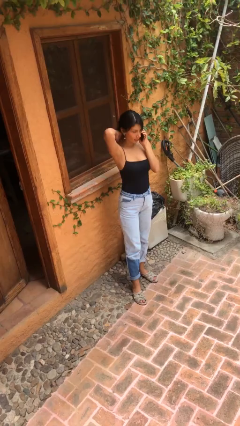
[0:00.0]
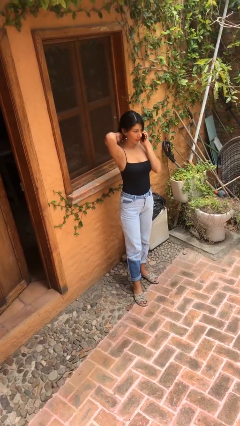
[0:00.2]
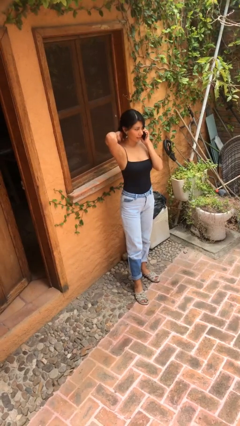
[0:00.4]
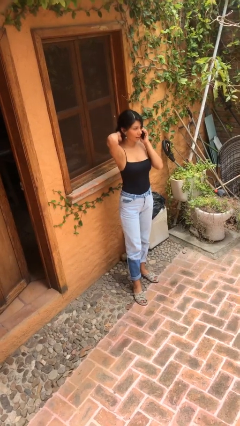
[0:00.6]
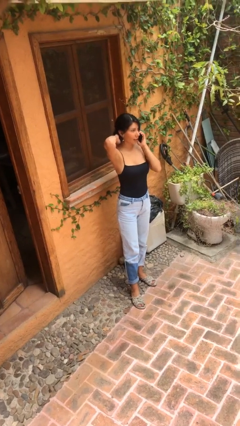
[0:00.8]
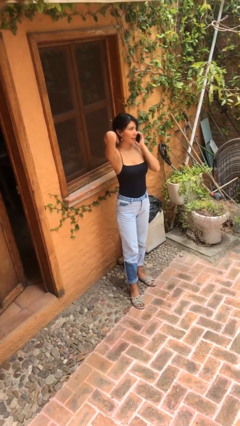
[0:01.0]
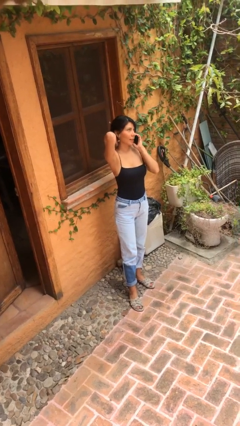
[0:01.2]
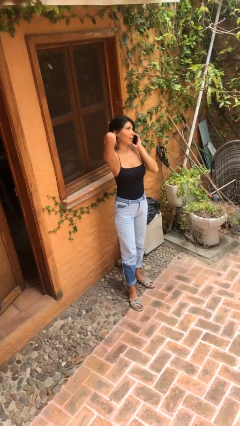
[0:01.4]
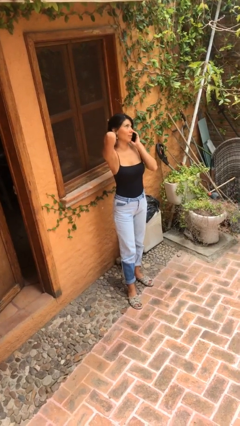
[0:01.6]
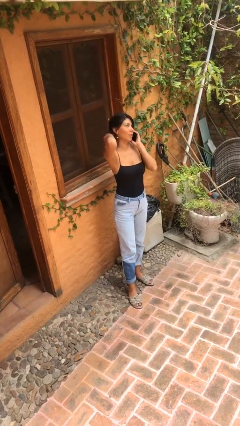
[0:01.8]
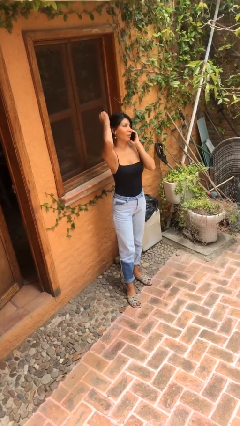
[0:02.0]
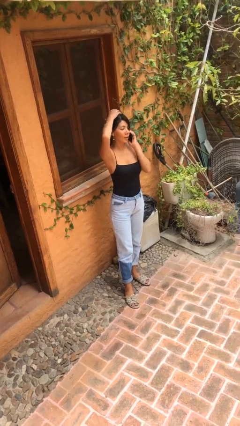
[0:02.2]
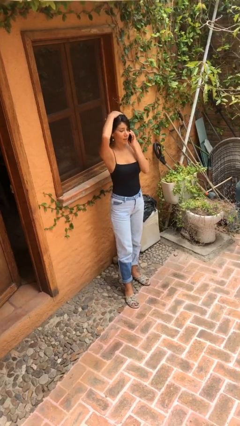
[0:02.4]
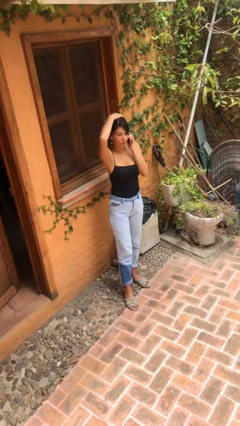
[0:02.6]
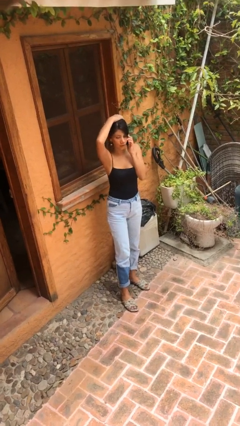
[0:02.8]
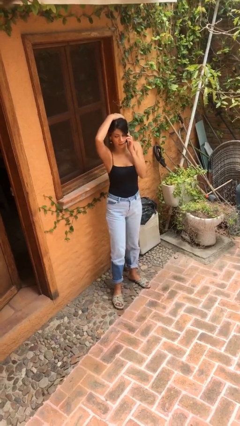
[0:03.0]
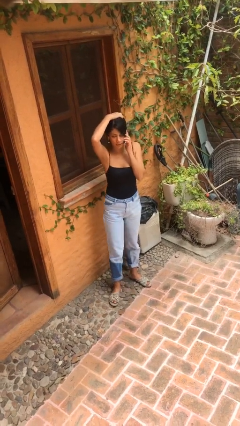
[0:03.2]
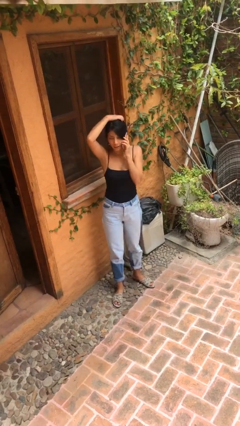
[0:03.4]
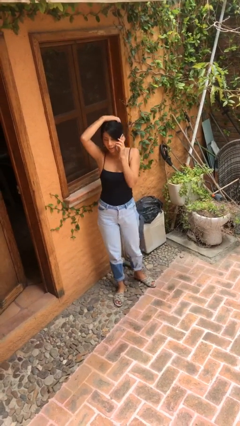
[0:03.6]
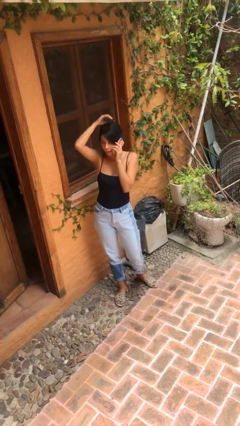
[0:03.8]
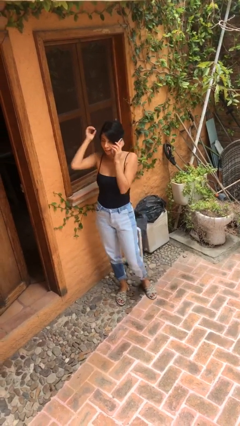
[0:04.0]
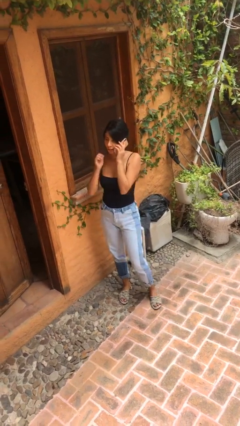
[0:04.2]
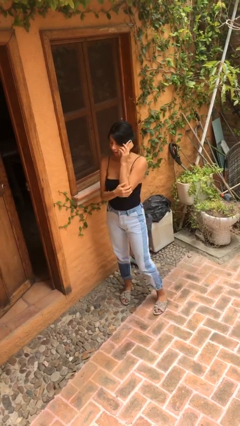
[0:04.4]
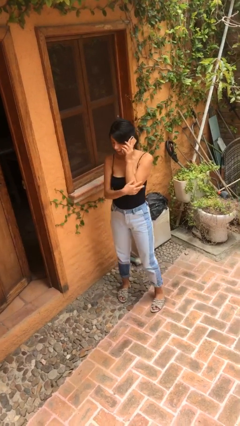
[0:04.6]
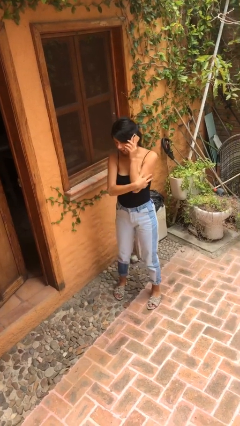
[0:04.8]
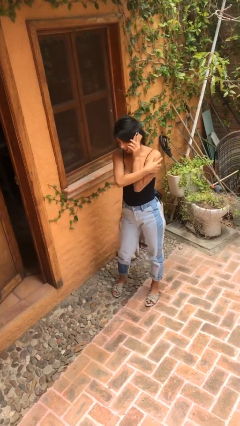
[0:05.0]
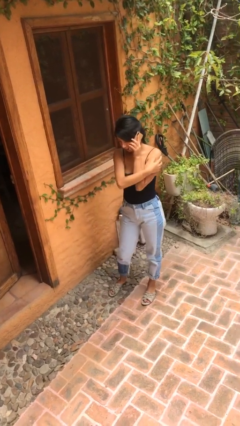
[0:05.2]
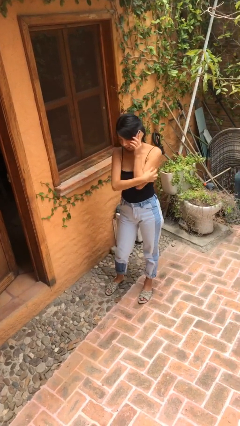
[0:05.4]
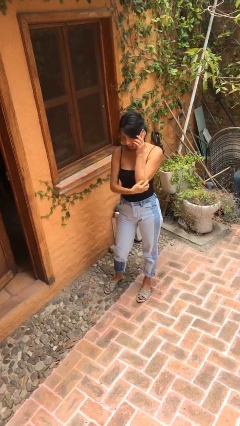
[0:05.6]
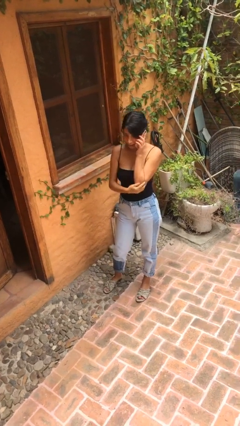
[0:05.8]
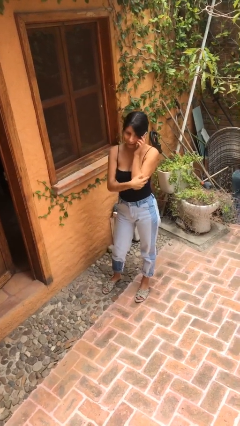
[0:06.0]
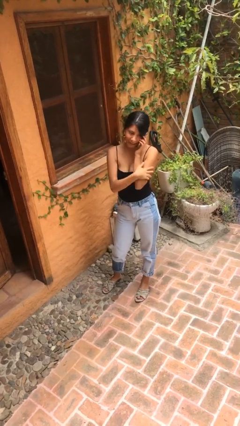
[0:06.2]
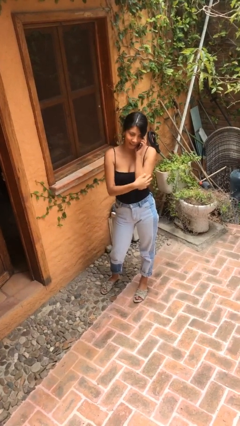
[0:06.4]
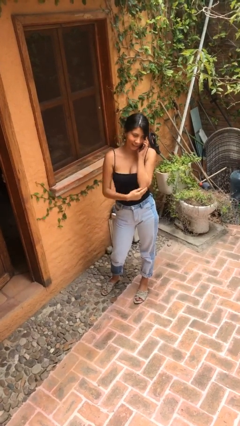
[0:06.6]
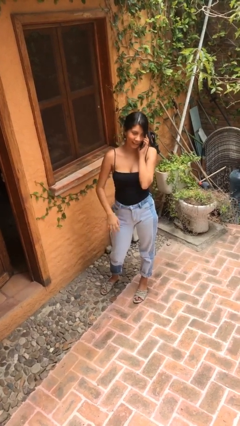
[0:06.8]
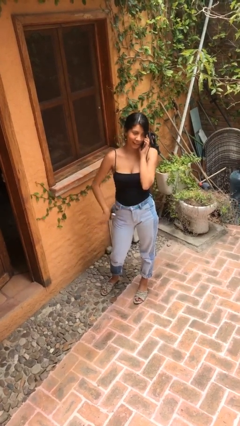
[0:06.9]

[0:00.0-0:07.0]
person talks on phone

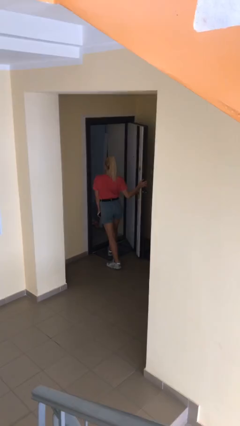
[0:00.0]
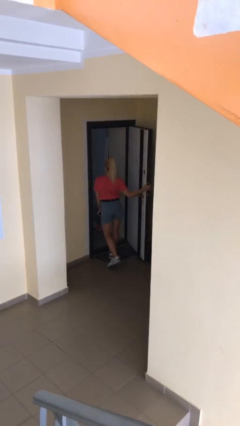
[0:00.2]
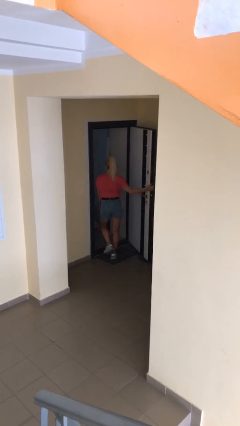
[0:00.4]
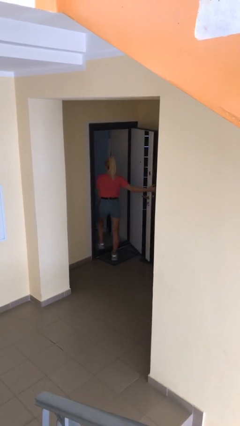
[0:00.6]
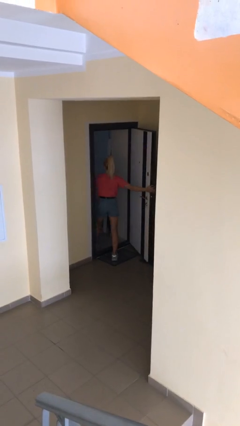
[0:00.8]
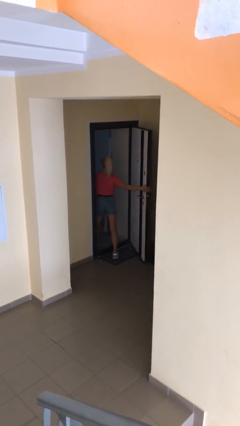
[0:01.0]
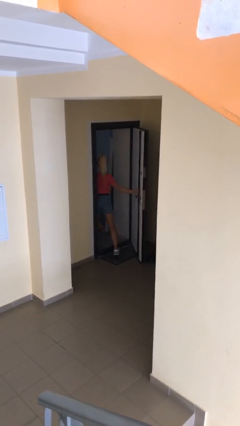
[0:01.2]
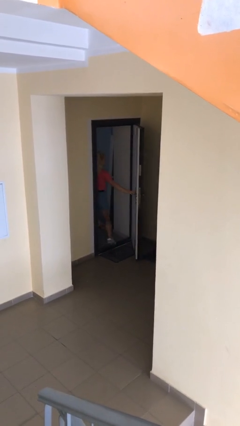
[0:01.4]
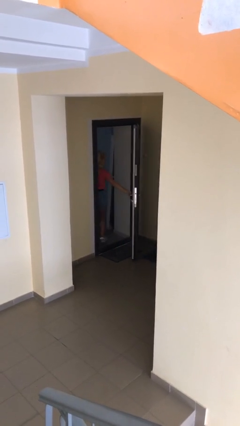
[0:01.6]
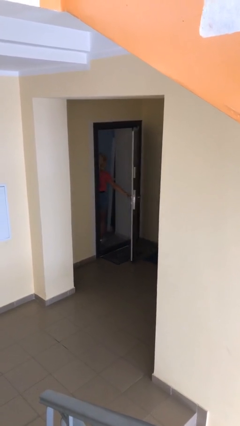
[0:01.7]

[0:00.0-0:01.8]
person exits scene through structure

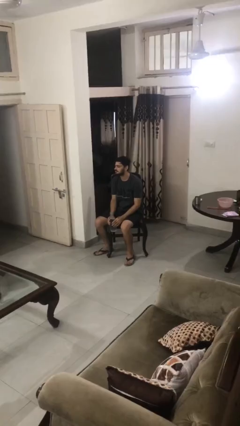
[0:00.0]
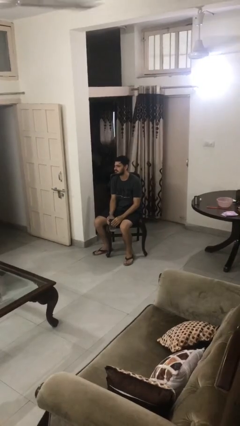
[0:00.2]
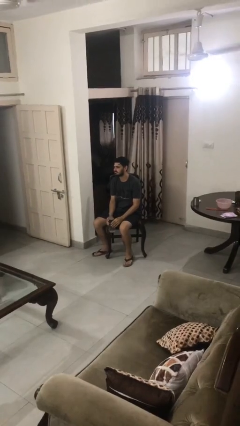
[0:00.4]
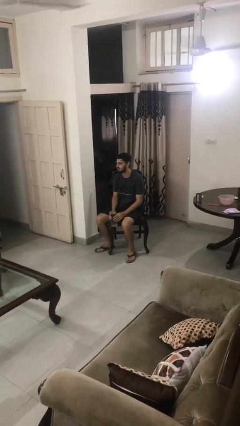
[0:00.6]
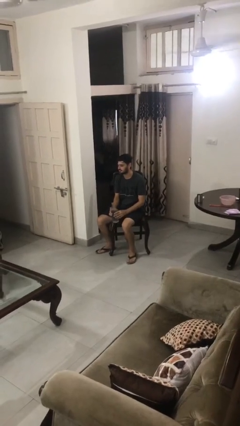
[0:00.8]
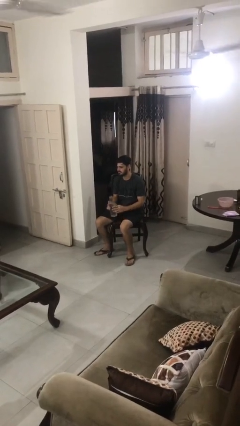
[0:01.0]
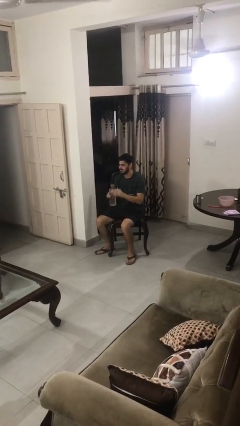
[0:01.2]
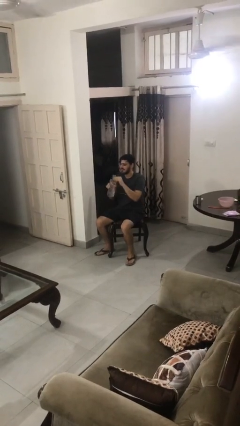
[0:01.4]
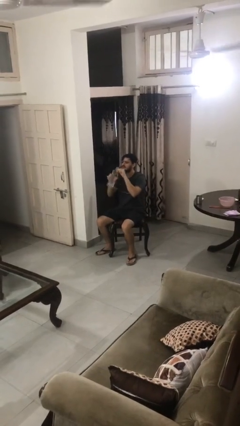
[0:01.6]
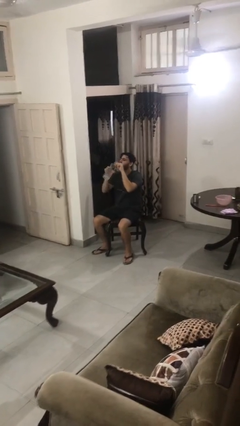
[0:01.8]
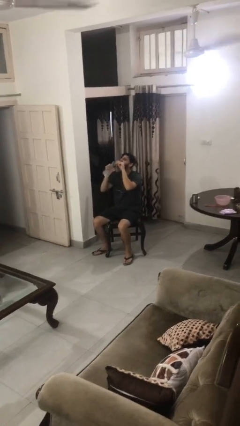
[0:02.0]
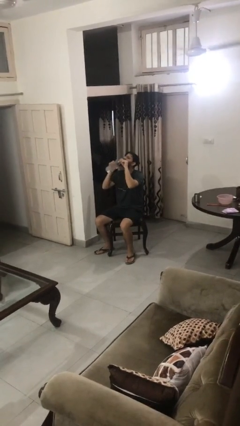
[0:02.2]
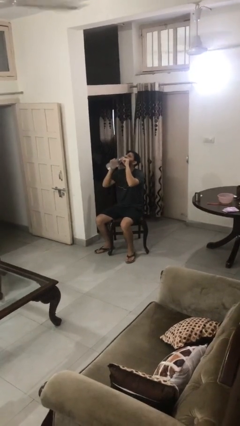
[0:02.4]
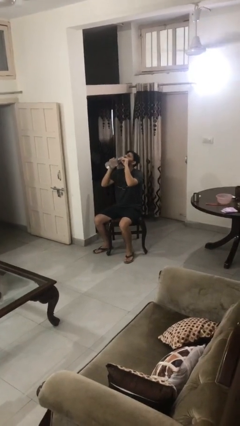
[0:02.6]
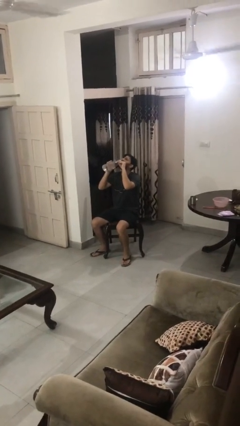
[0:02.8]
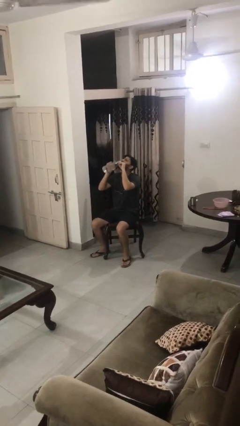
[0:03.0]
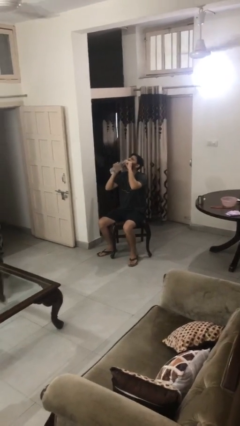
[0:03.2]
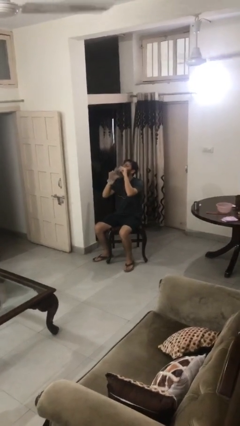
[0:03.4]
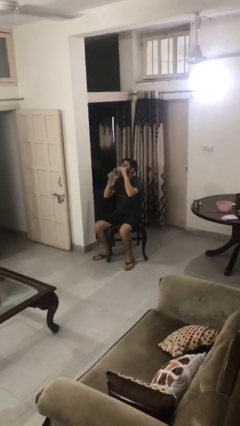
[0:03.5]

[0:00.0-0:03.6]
person drinks from bottle

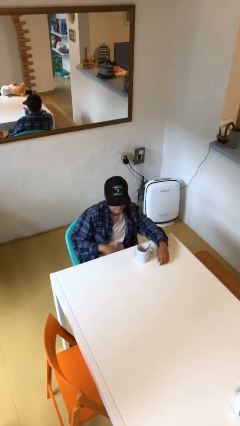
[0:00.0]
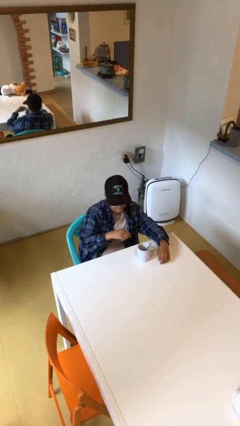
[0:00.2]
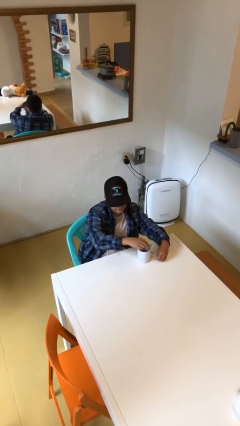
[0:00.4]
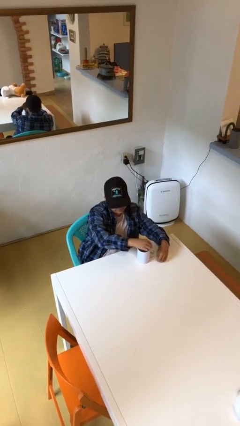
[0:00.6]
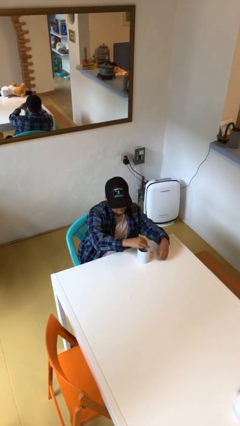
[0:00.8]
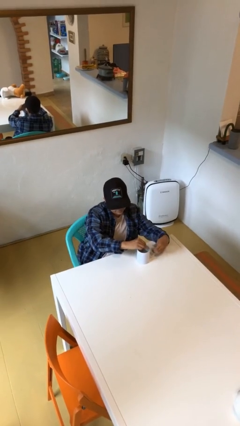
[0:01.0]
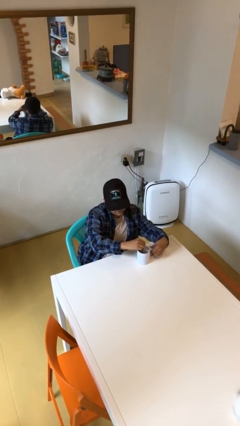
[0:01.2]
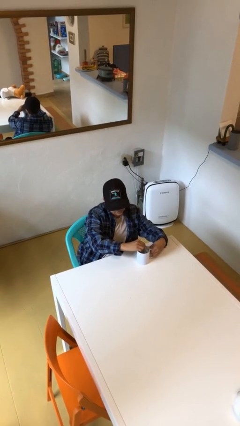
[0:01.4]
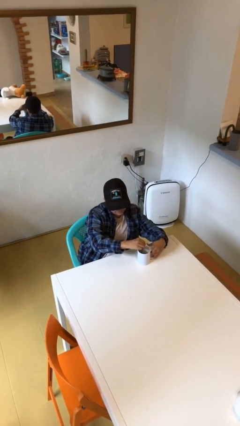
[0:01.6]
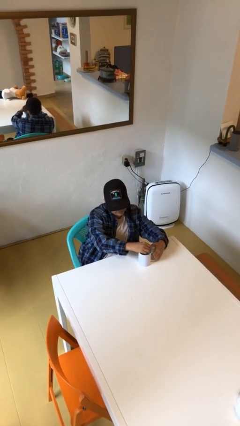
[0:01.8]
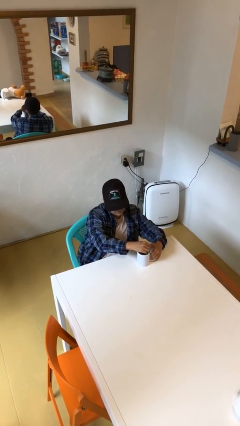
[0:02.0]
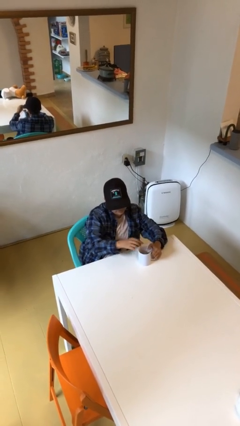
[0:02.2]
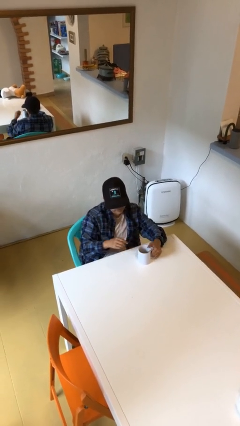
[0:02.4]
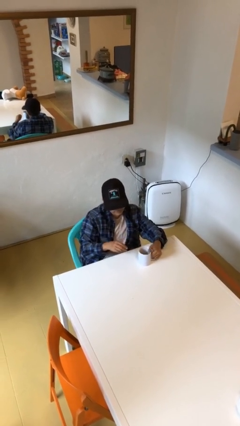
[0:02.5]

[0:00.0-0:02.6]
person stirs mug

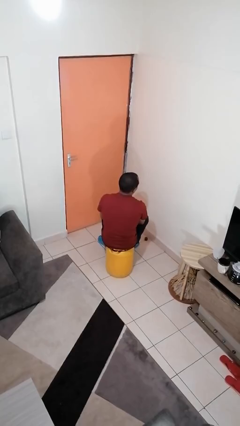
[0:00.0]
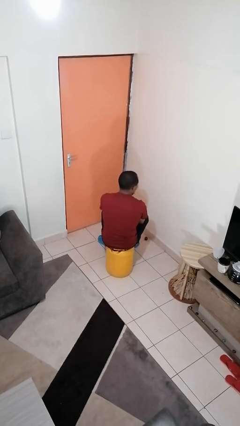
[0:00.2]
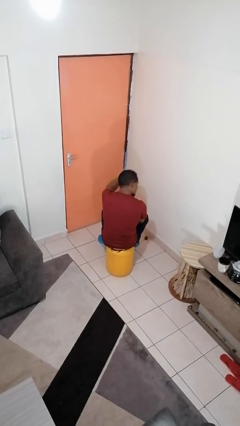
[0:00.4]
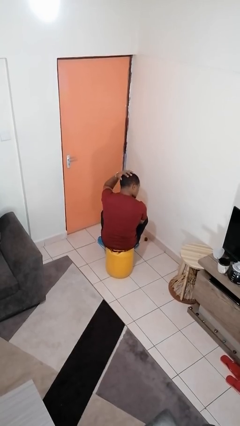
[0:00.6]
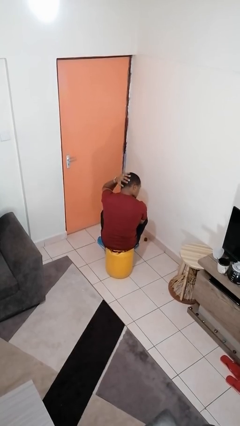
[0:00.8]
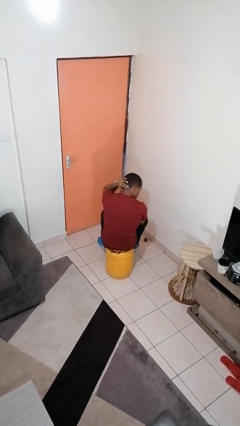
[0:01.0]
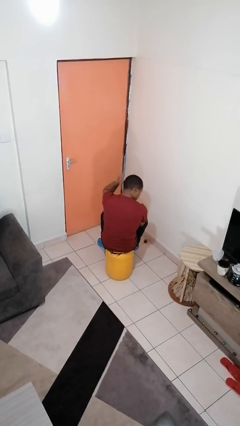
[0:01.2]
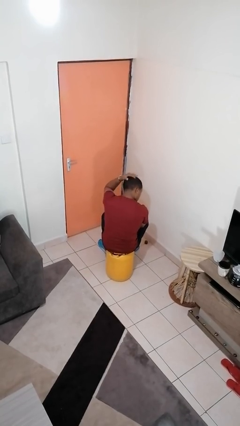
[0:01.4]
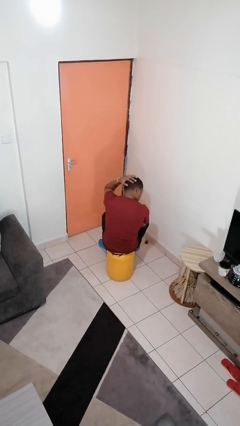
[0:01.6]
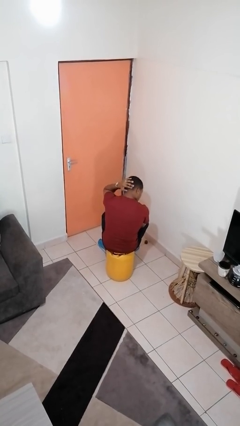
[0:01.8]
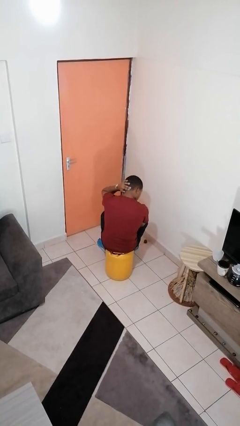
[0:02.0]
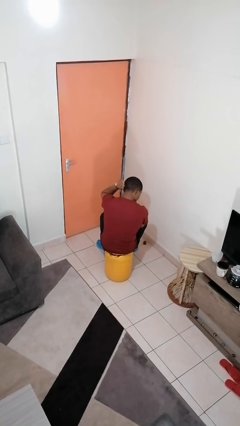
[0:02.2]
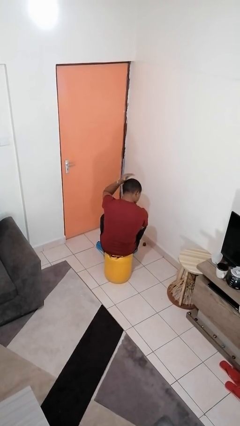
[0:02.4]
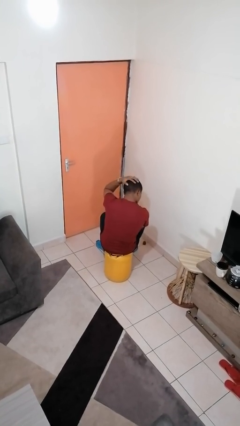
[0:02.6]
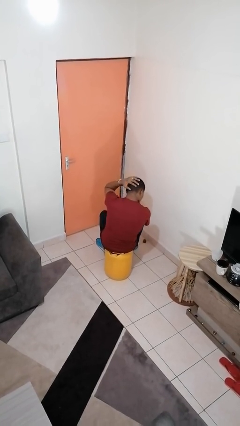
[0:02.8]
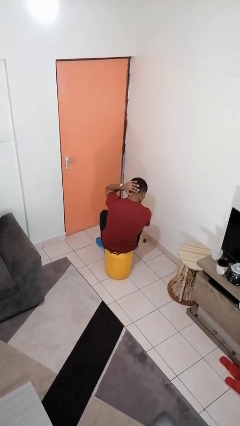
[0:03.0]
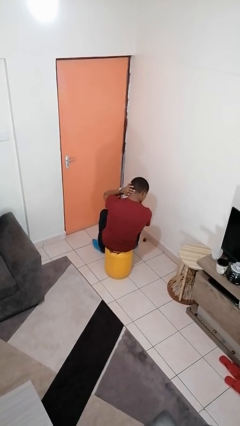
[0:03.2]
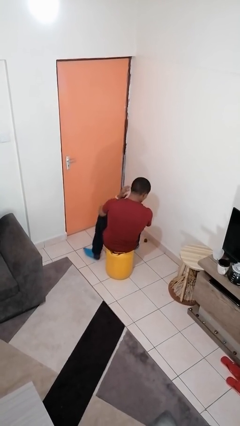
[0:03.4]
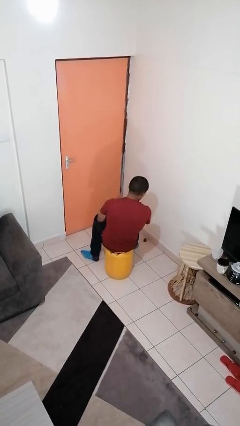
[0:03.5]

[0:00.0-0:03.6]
person strokes hair
